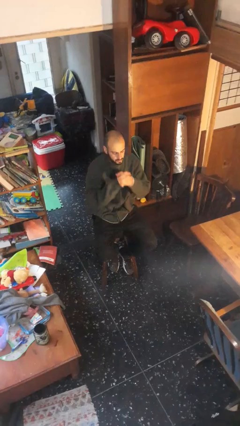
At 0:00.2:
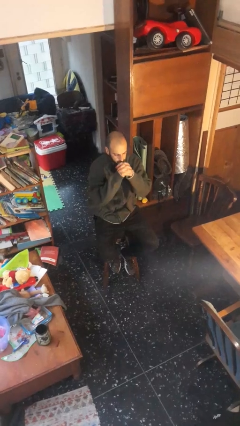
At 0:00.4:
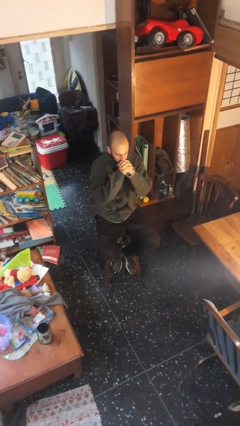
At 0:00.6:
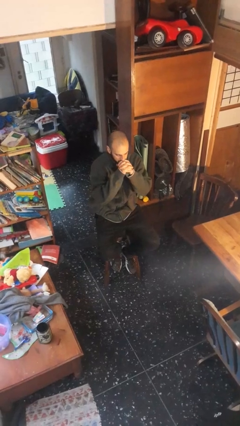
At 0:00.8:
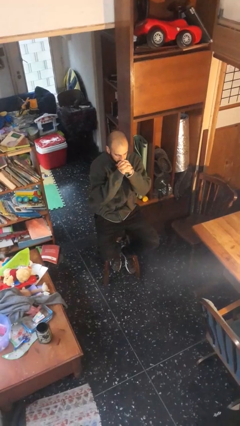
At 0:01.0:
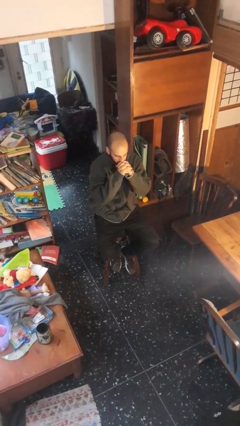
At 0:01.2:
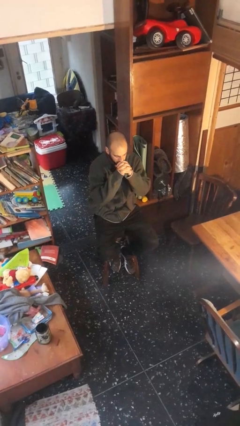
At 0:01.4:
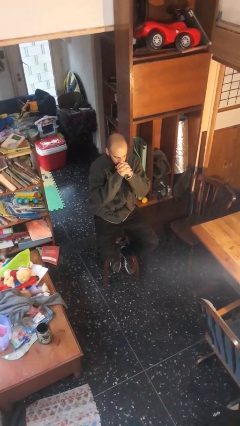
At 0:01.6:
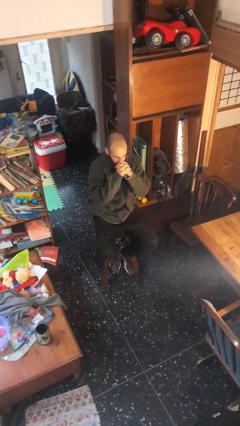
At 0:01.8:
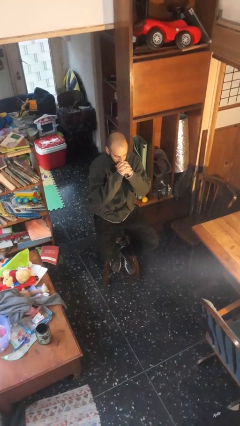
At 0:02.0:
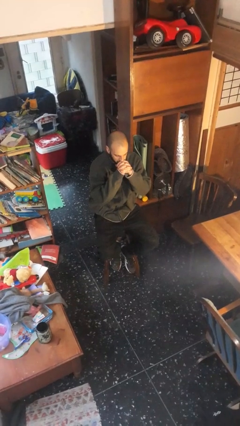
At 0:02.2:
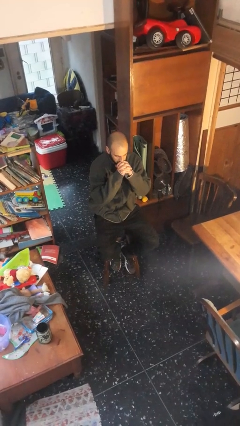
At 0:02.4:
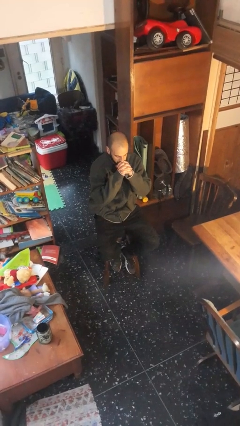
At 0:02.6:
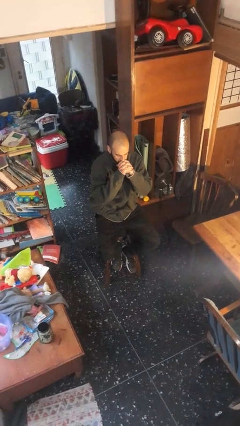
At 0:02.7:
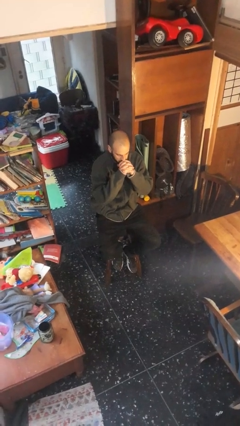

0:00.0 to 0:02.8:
person prays

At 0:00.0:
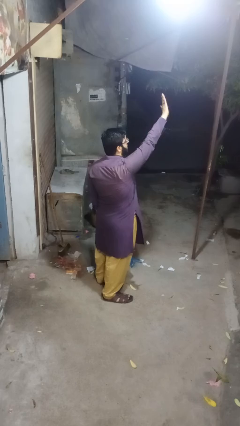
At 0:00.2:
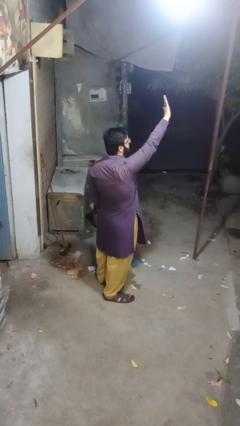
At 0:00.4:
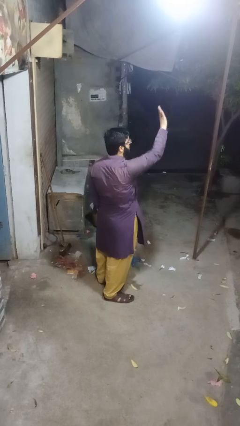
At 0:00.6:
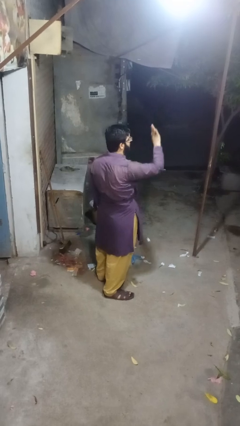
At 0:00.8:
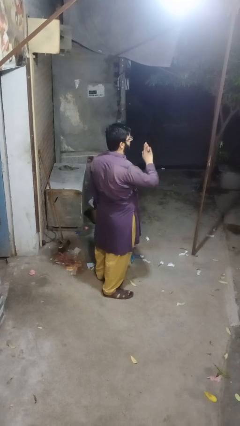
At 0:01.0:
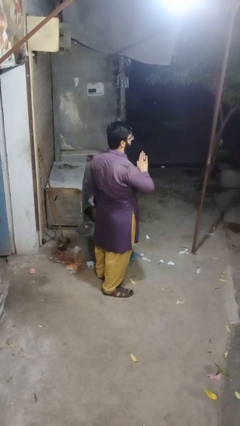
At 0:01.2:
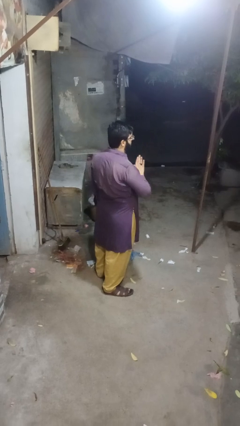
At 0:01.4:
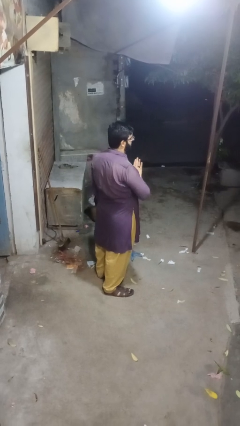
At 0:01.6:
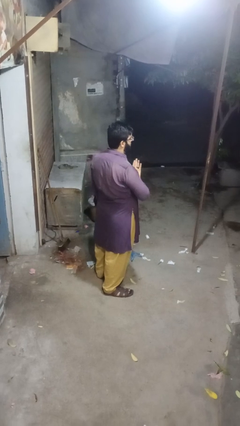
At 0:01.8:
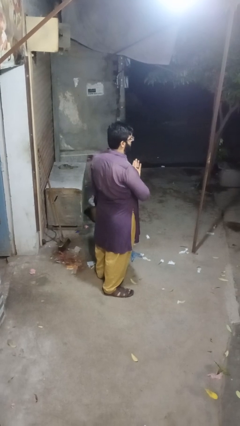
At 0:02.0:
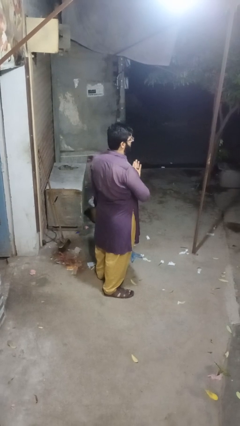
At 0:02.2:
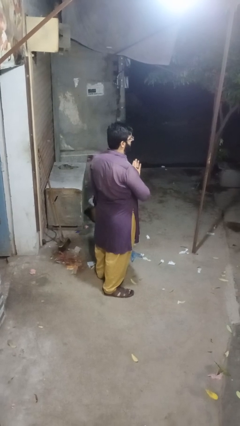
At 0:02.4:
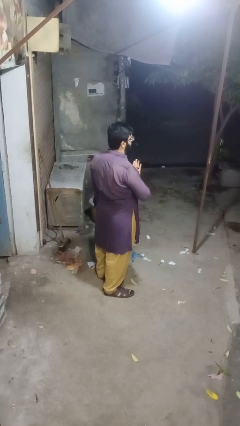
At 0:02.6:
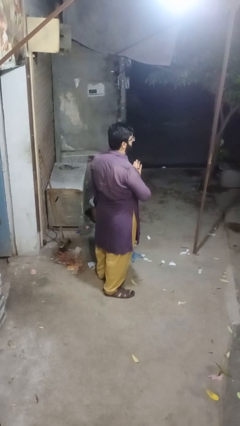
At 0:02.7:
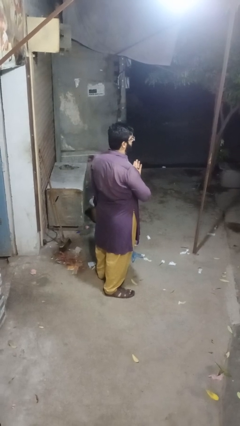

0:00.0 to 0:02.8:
person gestures swipe down

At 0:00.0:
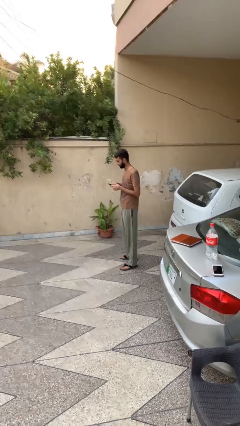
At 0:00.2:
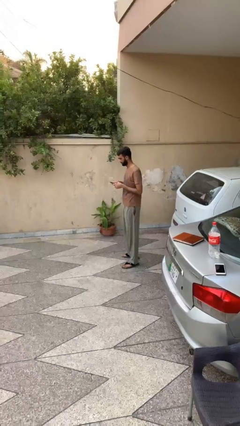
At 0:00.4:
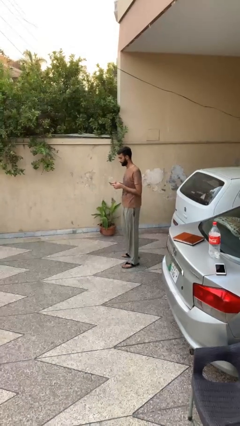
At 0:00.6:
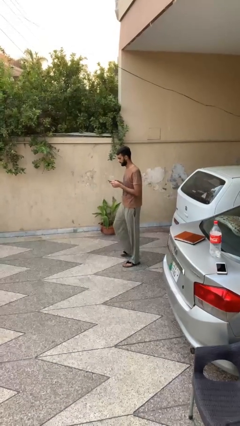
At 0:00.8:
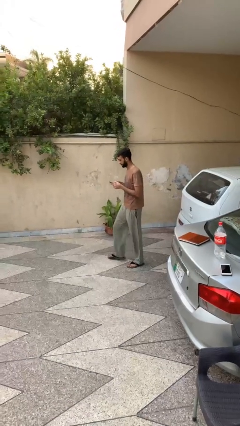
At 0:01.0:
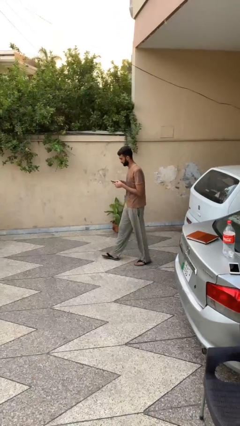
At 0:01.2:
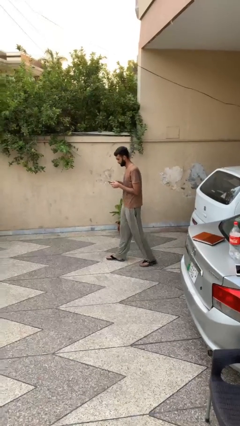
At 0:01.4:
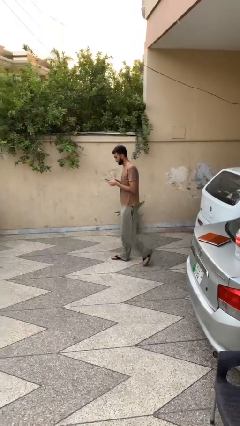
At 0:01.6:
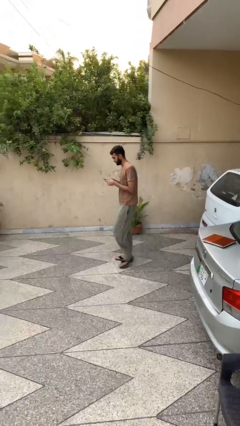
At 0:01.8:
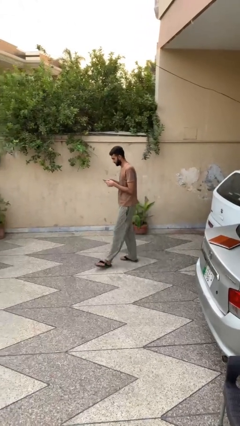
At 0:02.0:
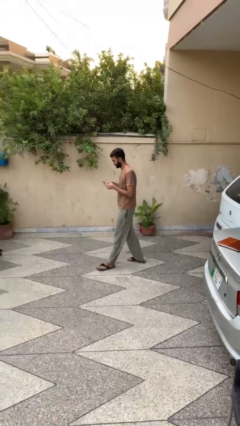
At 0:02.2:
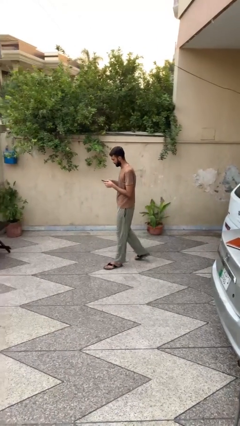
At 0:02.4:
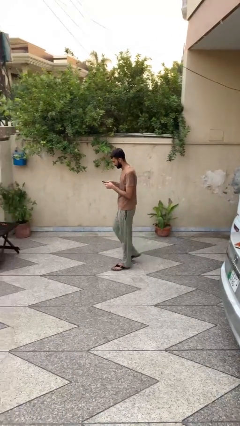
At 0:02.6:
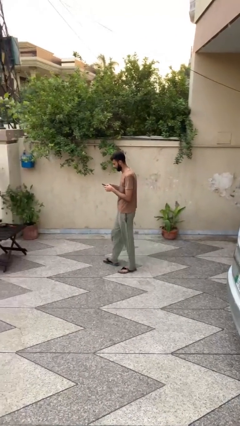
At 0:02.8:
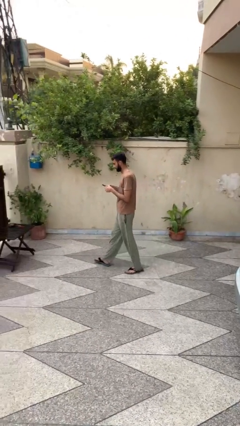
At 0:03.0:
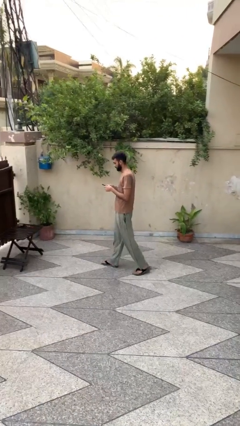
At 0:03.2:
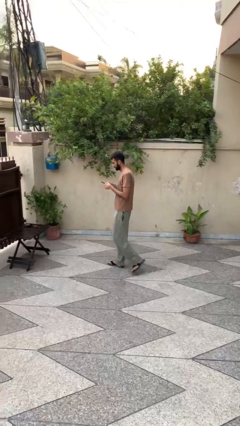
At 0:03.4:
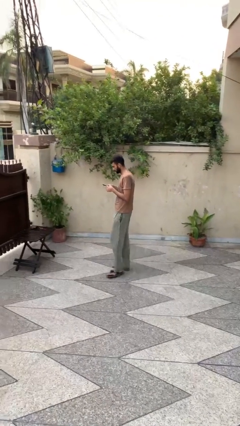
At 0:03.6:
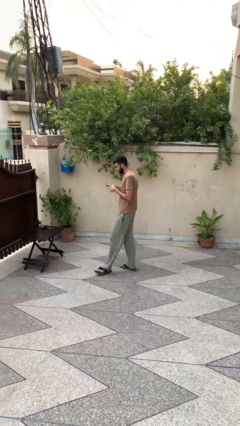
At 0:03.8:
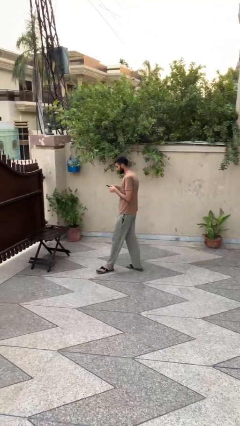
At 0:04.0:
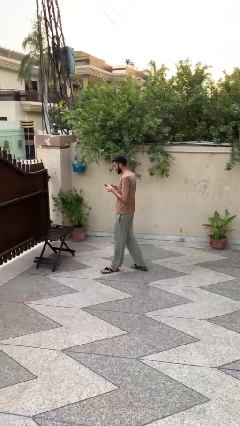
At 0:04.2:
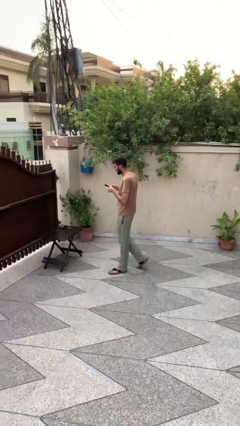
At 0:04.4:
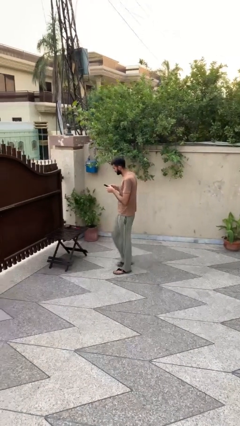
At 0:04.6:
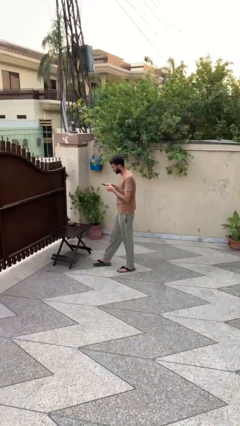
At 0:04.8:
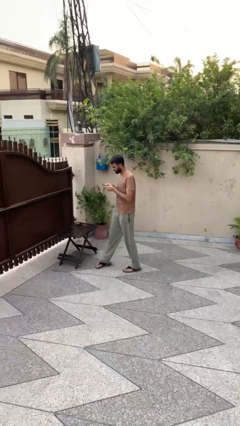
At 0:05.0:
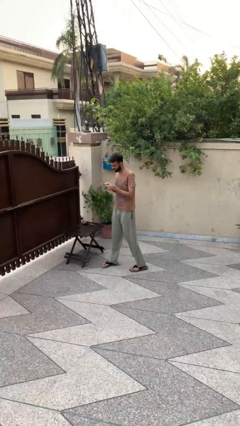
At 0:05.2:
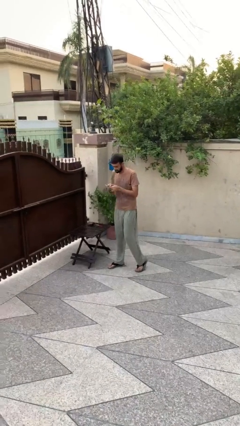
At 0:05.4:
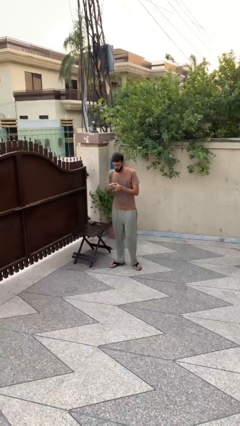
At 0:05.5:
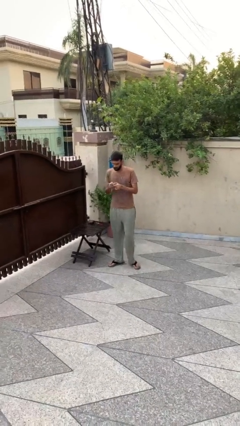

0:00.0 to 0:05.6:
person texts on phone

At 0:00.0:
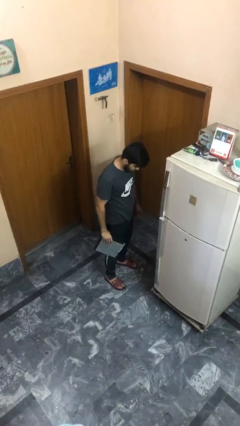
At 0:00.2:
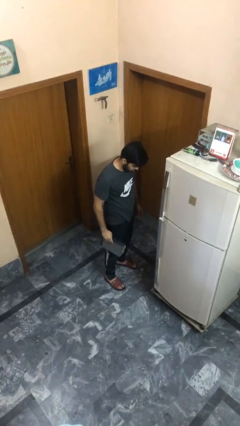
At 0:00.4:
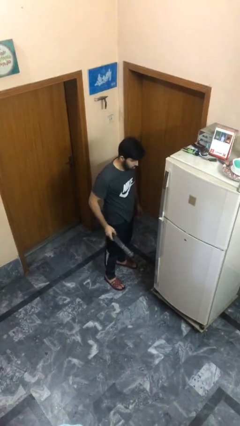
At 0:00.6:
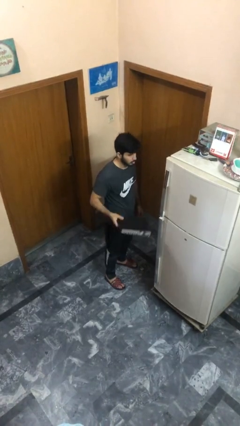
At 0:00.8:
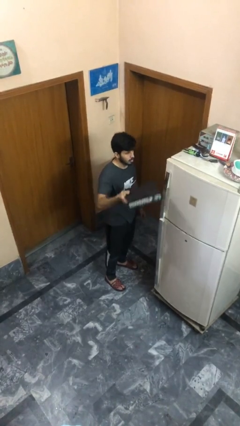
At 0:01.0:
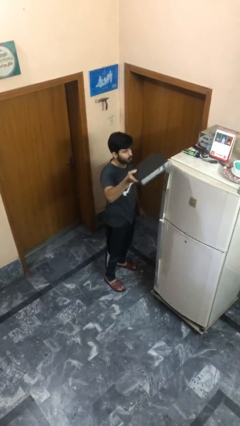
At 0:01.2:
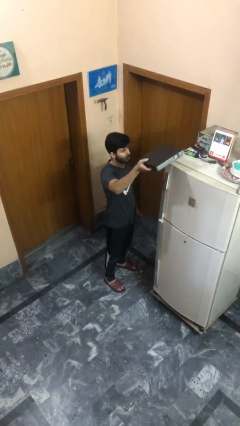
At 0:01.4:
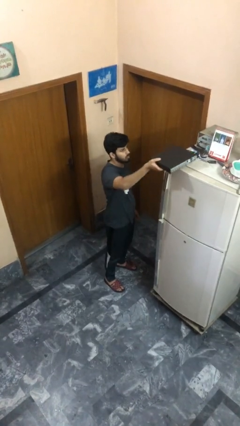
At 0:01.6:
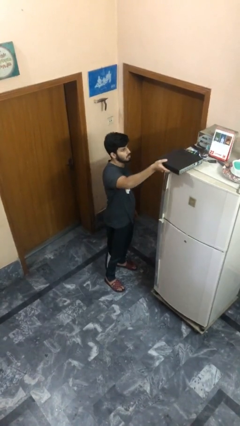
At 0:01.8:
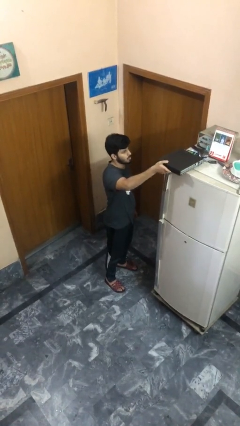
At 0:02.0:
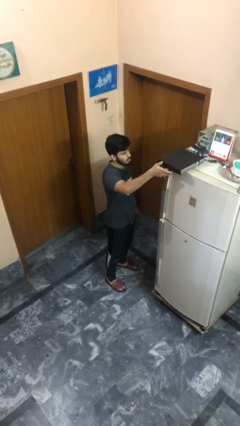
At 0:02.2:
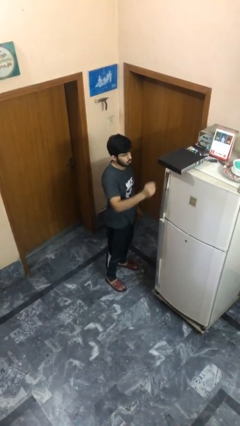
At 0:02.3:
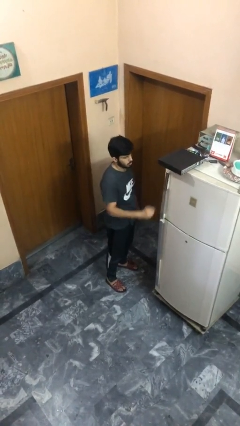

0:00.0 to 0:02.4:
person puts down object on countertop

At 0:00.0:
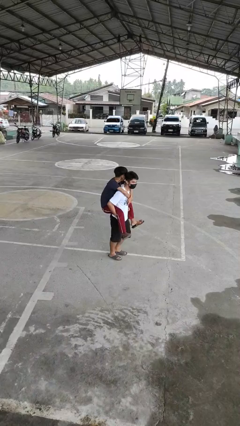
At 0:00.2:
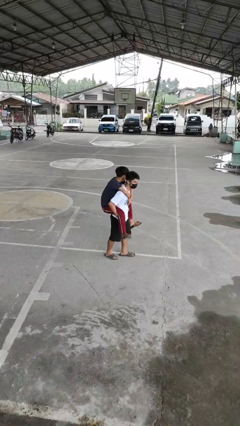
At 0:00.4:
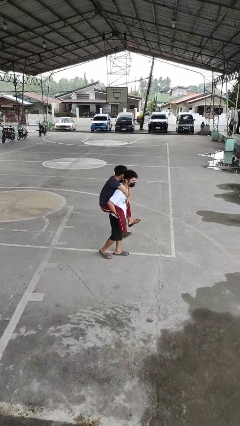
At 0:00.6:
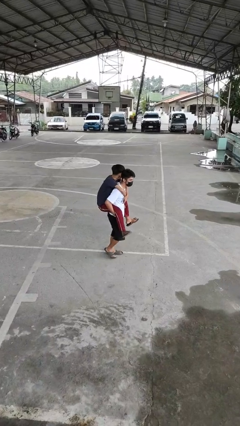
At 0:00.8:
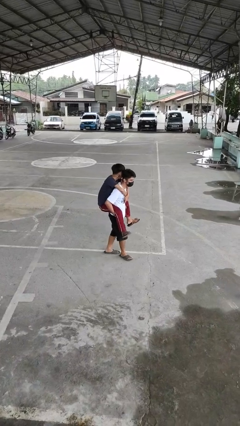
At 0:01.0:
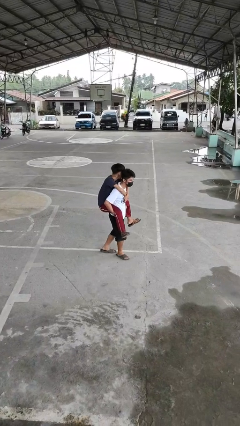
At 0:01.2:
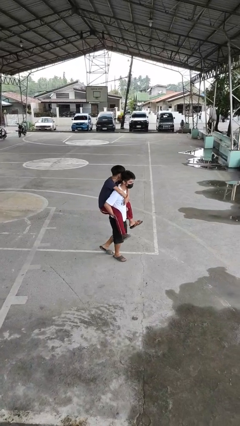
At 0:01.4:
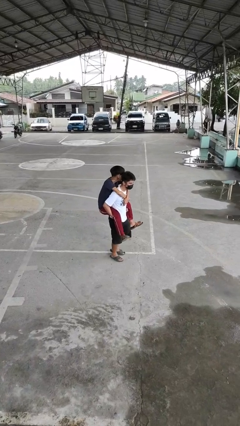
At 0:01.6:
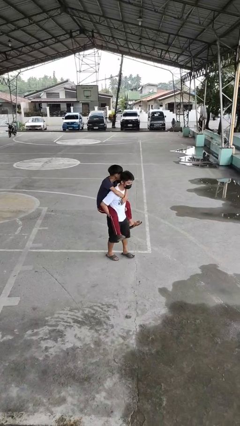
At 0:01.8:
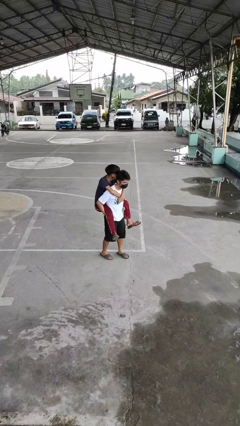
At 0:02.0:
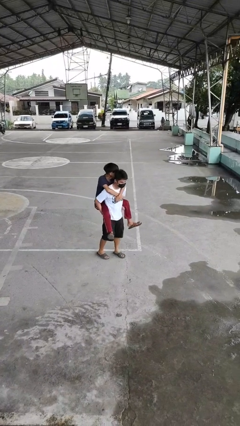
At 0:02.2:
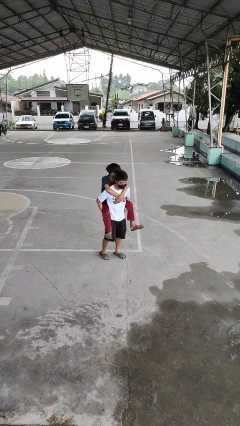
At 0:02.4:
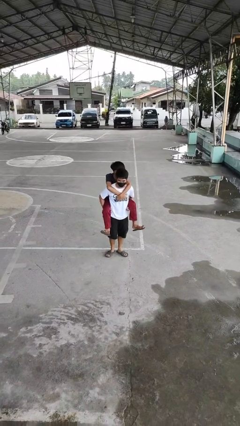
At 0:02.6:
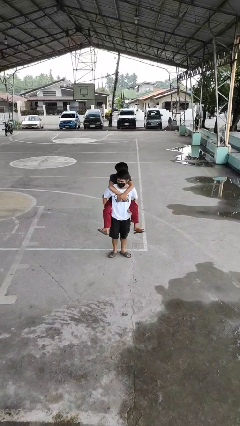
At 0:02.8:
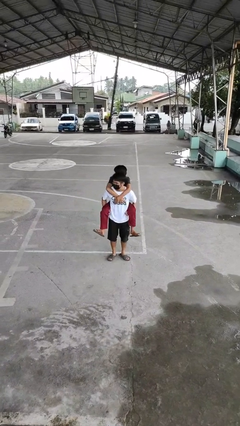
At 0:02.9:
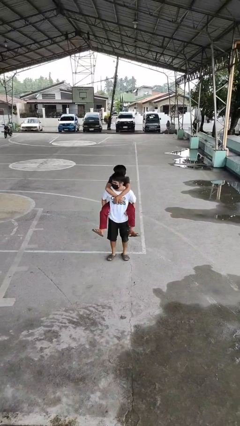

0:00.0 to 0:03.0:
person carries person on back

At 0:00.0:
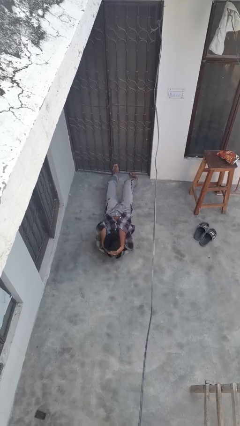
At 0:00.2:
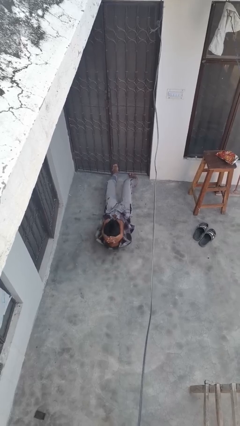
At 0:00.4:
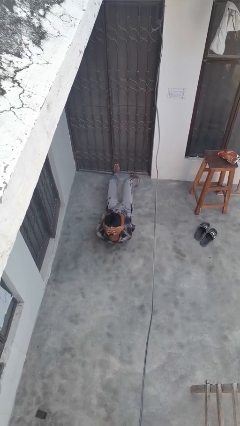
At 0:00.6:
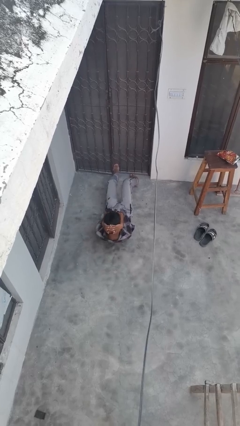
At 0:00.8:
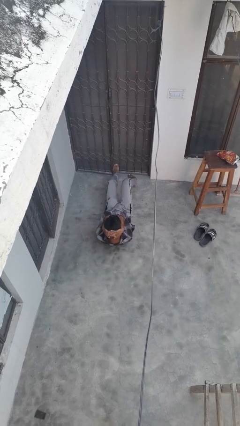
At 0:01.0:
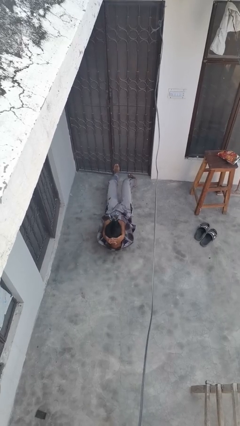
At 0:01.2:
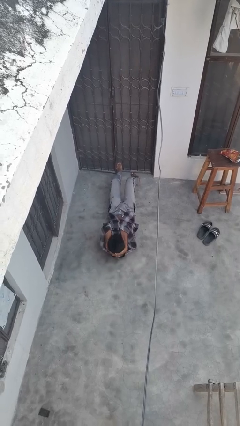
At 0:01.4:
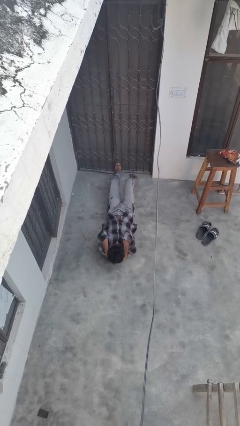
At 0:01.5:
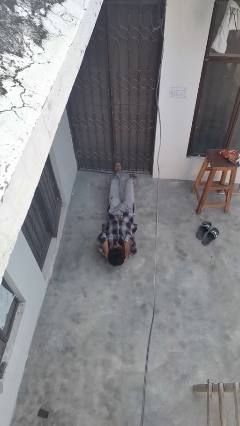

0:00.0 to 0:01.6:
person exercises with situp
